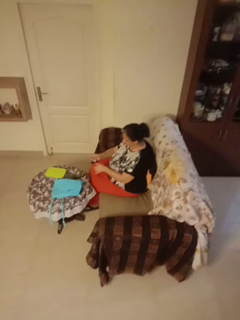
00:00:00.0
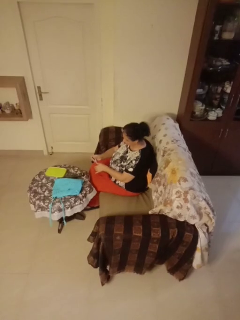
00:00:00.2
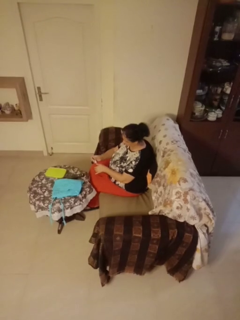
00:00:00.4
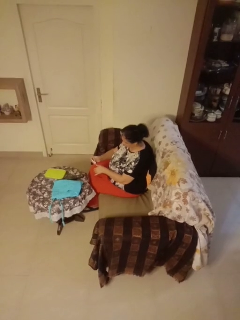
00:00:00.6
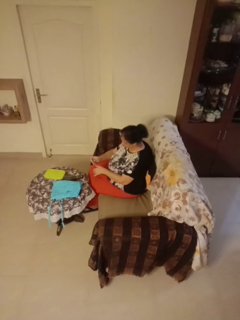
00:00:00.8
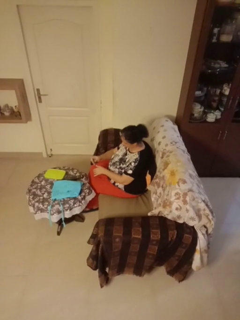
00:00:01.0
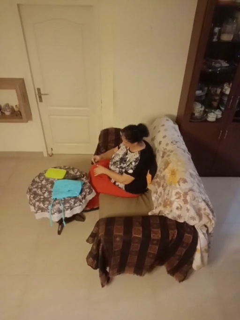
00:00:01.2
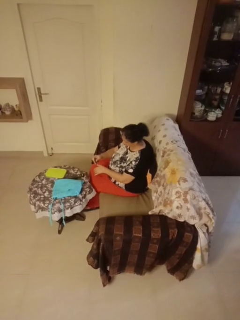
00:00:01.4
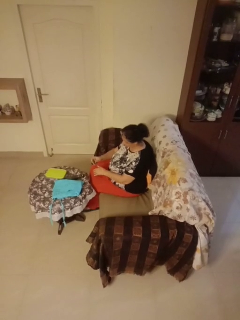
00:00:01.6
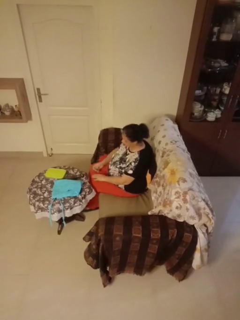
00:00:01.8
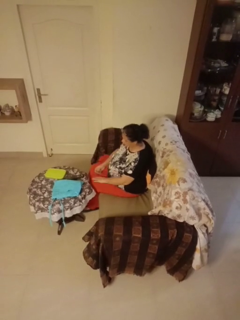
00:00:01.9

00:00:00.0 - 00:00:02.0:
person clips fingernails

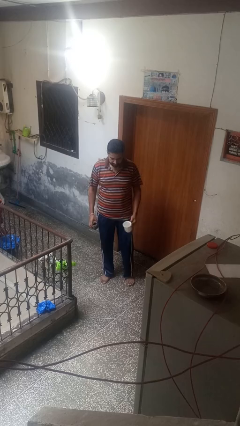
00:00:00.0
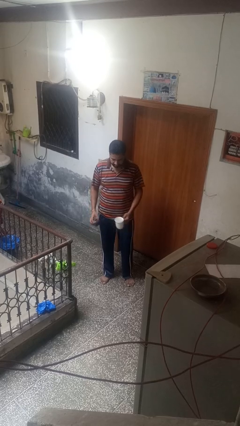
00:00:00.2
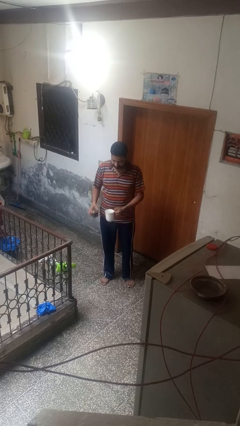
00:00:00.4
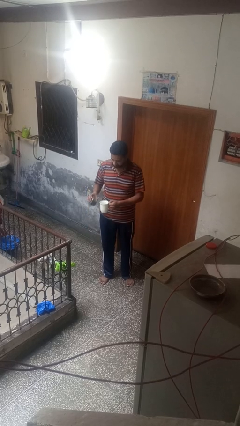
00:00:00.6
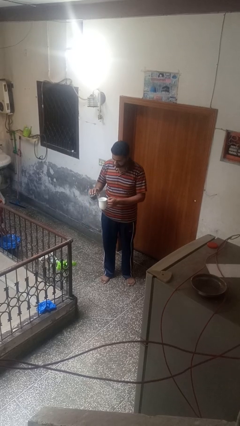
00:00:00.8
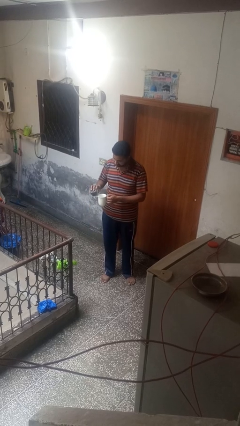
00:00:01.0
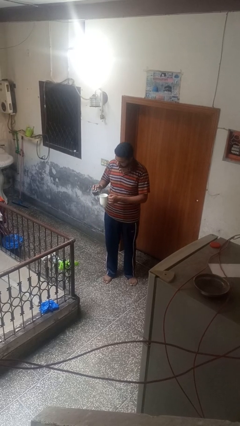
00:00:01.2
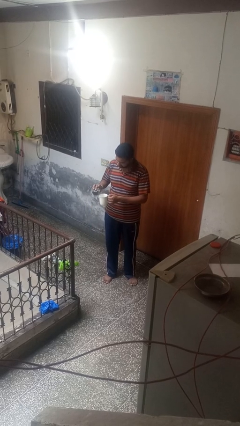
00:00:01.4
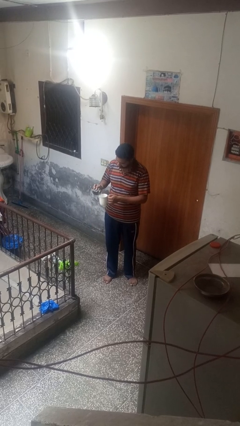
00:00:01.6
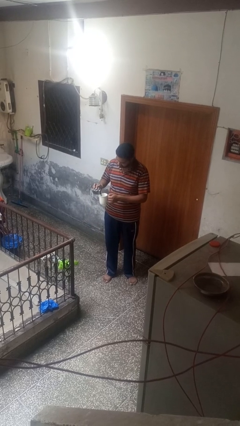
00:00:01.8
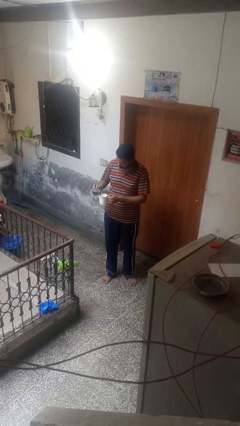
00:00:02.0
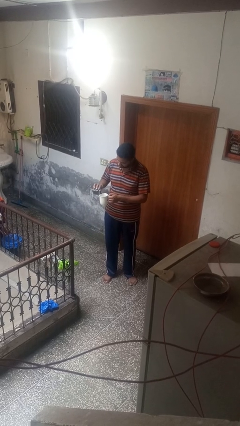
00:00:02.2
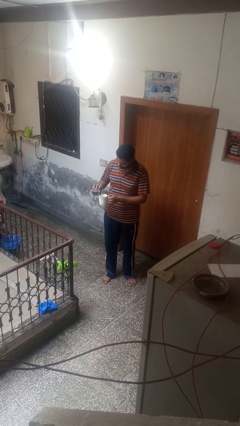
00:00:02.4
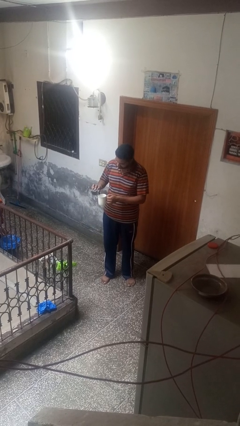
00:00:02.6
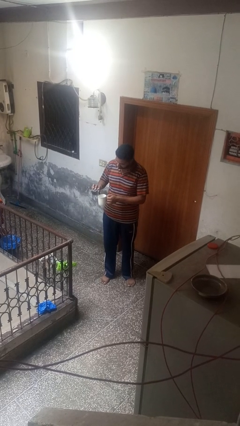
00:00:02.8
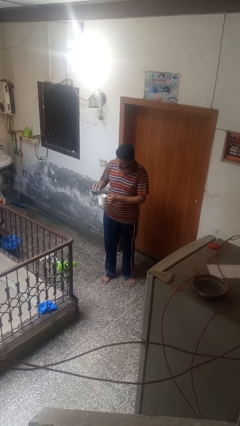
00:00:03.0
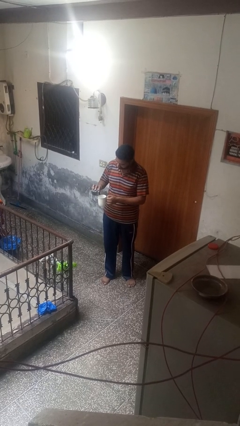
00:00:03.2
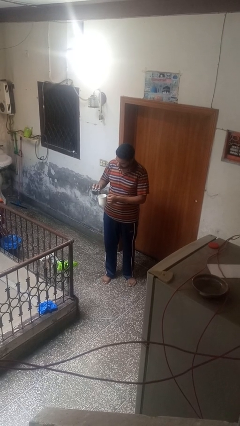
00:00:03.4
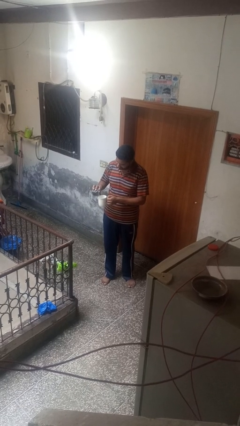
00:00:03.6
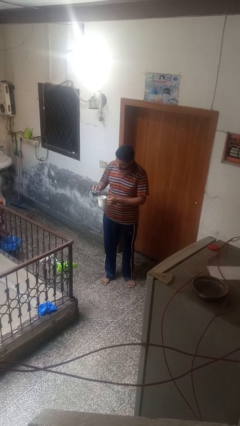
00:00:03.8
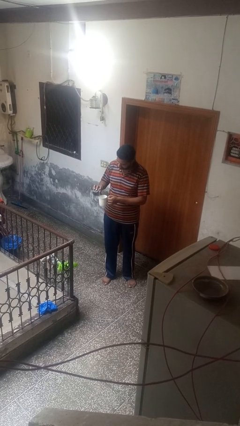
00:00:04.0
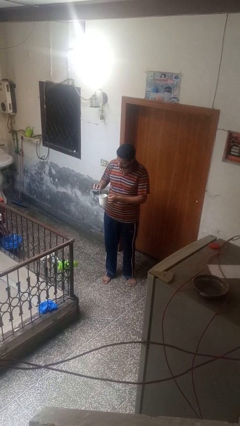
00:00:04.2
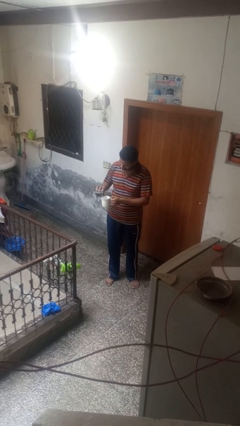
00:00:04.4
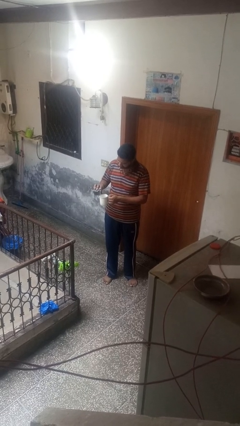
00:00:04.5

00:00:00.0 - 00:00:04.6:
person pours coffee into mug

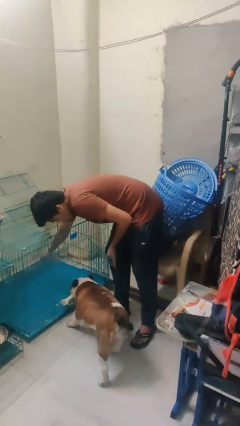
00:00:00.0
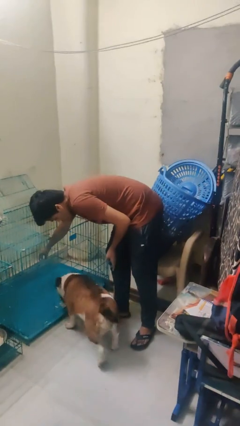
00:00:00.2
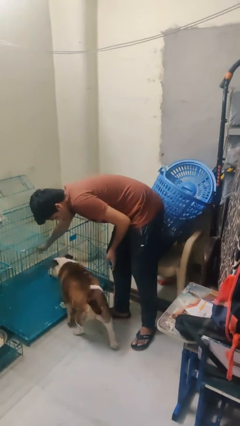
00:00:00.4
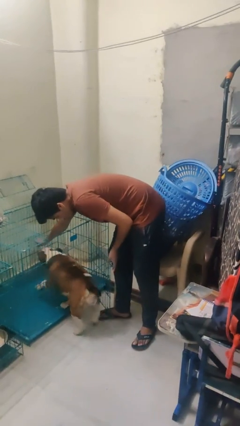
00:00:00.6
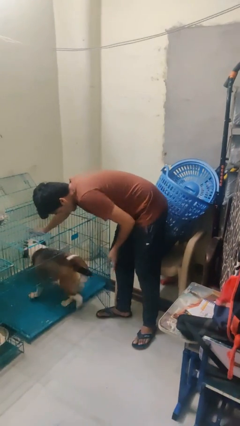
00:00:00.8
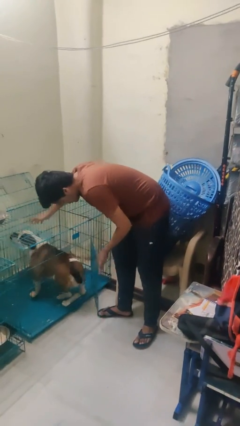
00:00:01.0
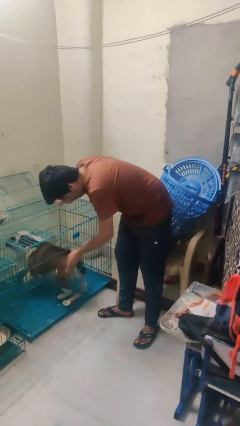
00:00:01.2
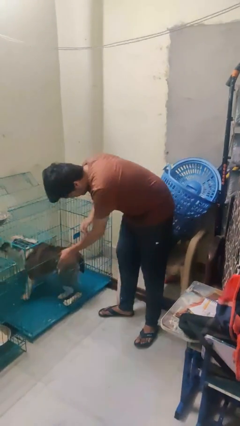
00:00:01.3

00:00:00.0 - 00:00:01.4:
person crates dog

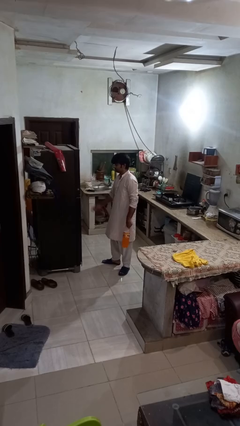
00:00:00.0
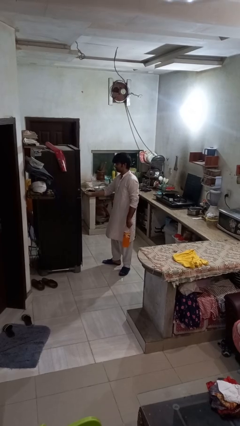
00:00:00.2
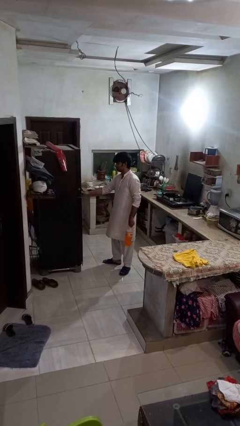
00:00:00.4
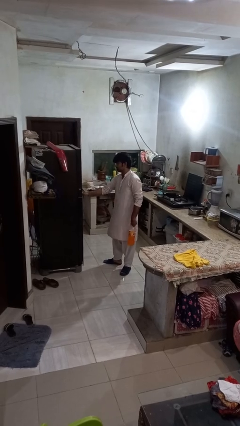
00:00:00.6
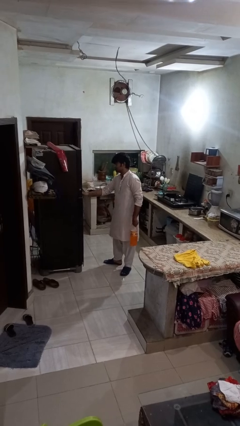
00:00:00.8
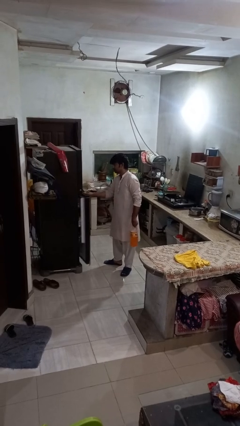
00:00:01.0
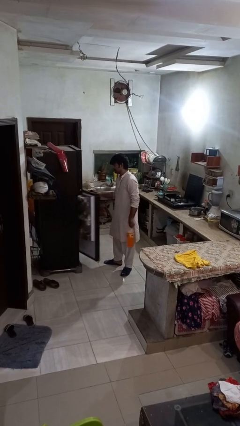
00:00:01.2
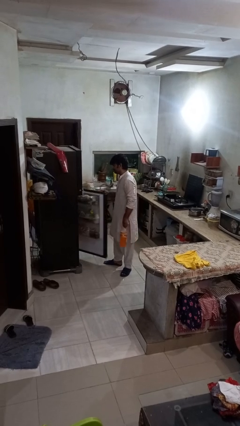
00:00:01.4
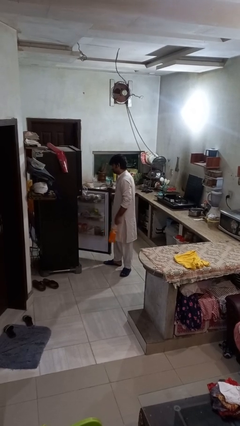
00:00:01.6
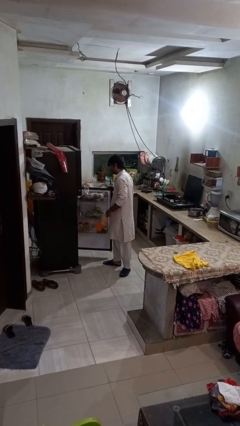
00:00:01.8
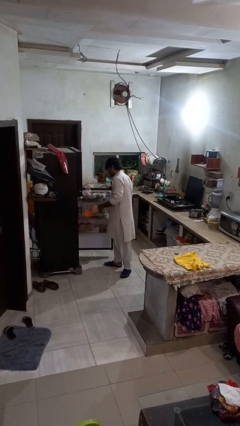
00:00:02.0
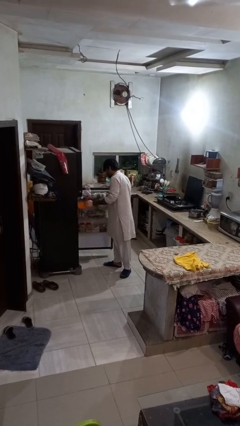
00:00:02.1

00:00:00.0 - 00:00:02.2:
person opens refrigerator

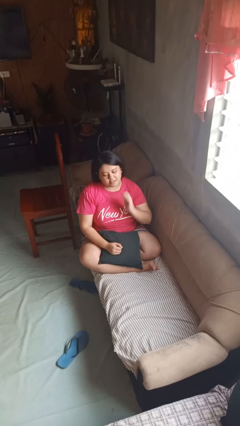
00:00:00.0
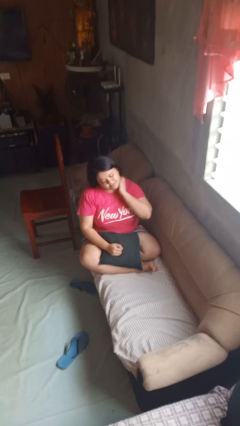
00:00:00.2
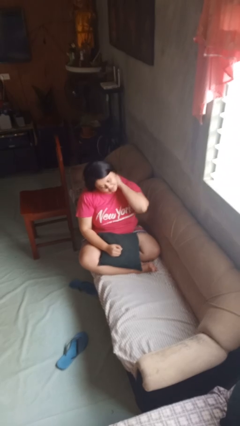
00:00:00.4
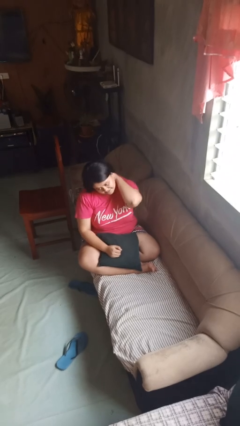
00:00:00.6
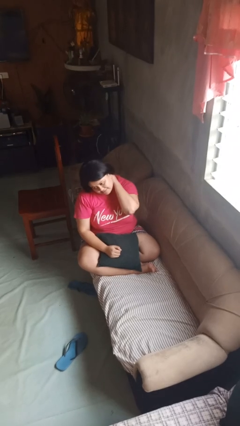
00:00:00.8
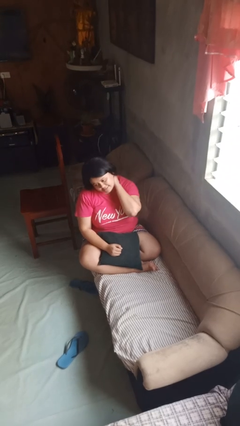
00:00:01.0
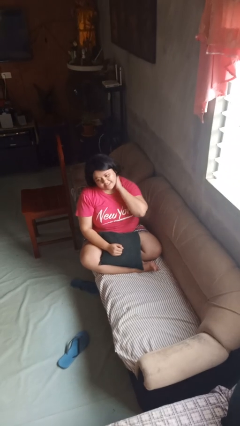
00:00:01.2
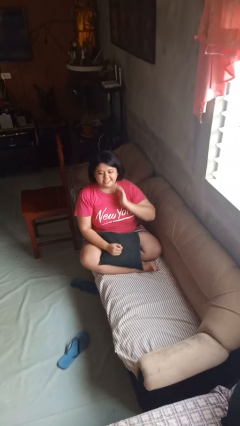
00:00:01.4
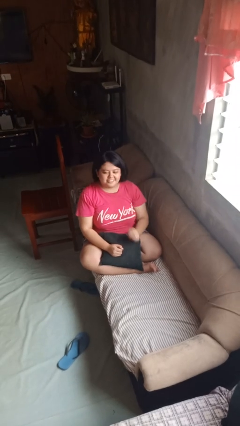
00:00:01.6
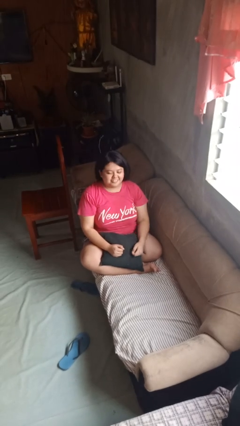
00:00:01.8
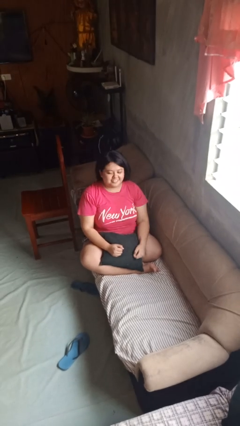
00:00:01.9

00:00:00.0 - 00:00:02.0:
person rubs neck

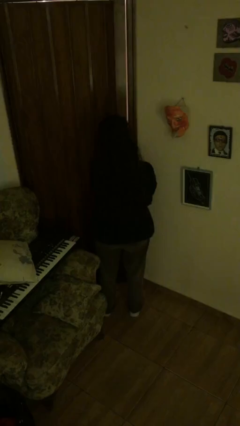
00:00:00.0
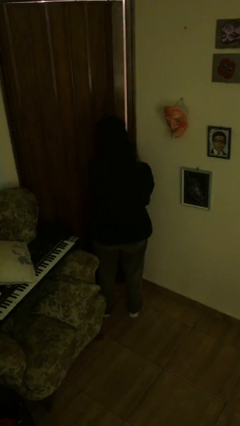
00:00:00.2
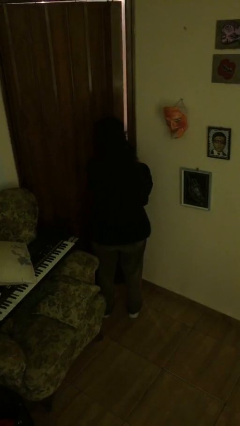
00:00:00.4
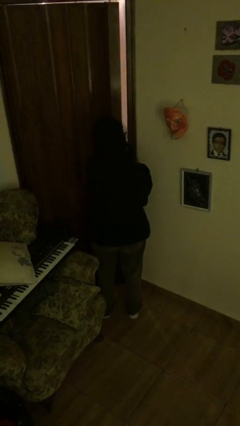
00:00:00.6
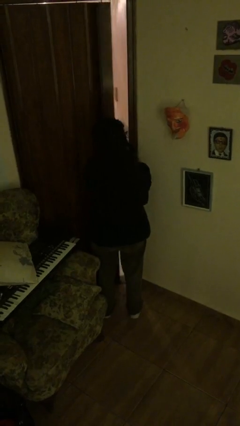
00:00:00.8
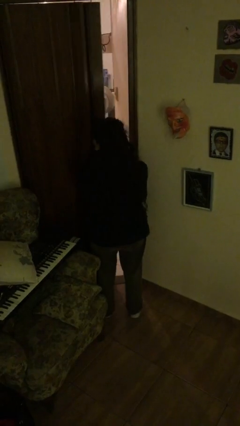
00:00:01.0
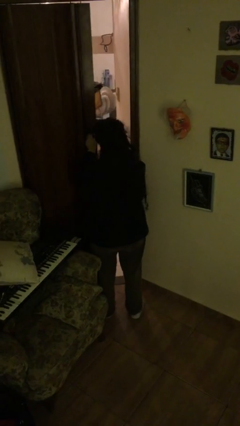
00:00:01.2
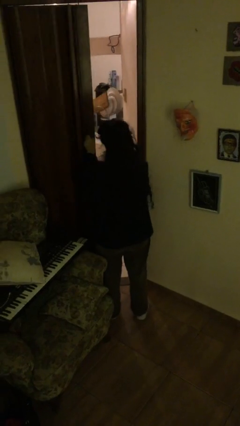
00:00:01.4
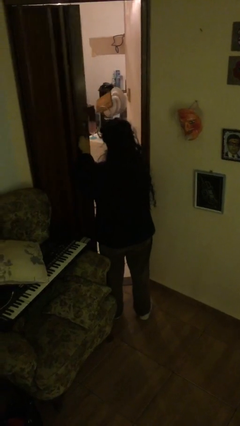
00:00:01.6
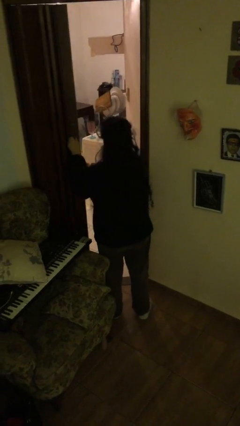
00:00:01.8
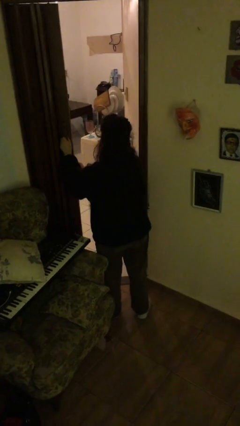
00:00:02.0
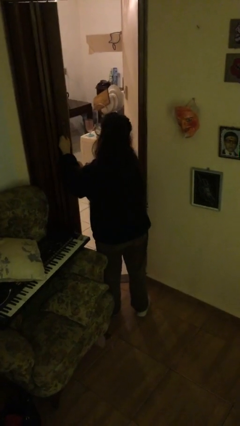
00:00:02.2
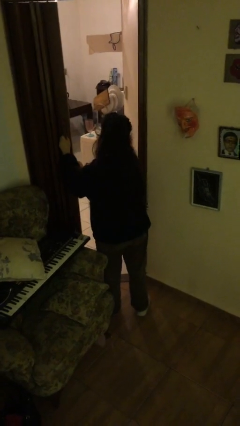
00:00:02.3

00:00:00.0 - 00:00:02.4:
person opens sliding door

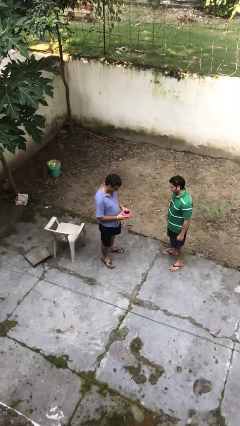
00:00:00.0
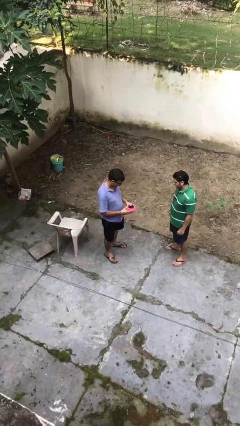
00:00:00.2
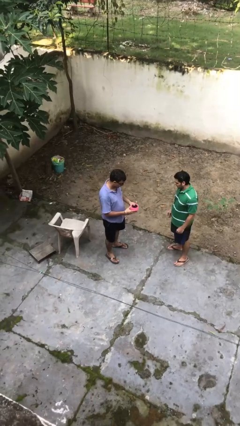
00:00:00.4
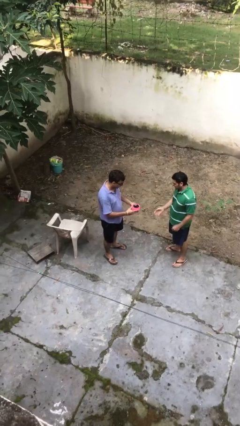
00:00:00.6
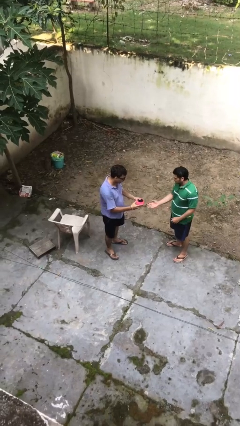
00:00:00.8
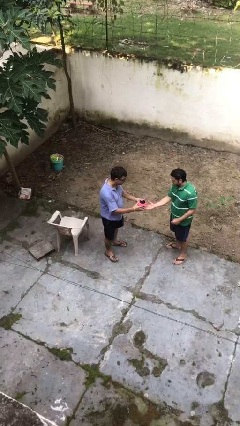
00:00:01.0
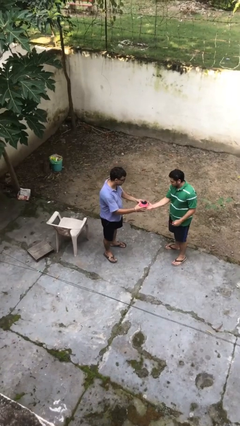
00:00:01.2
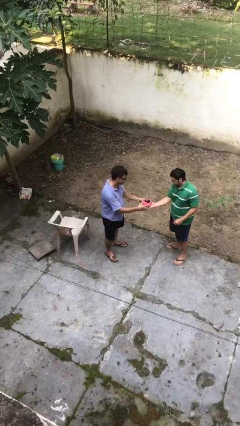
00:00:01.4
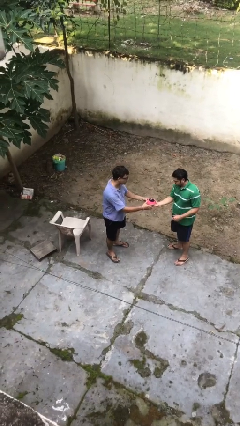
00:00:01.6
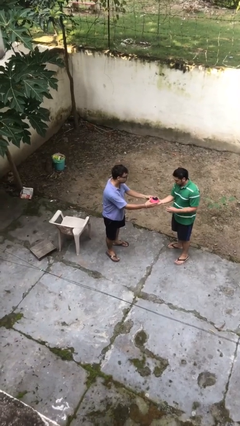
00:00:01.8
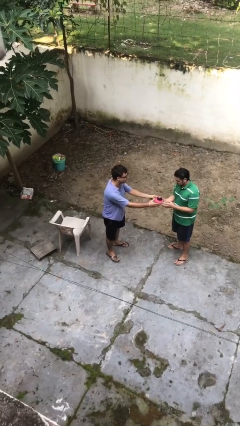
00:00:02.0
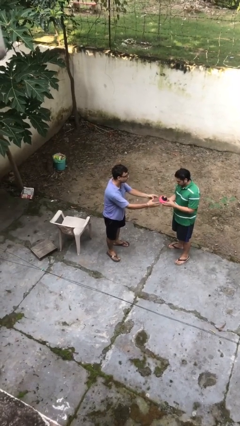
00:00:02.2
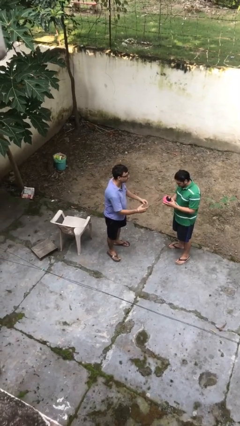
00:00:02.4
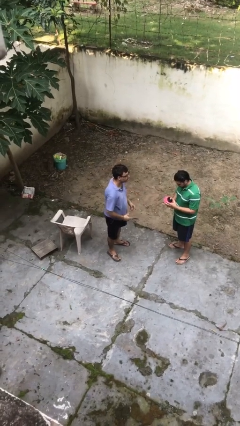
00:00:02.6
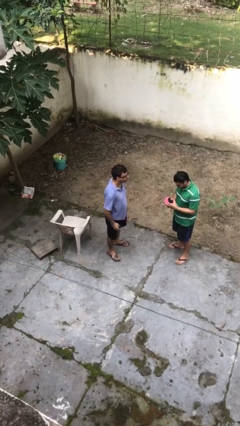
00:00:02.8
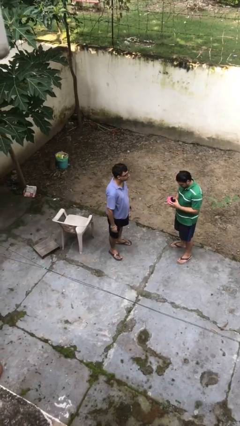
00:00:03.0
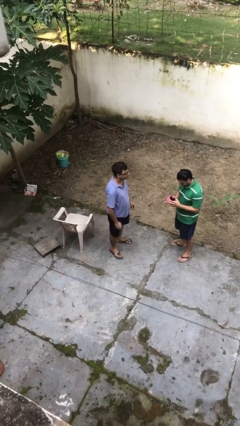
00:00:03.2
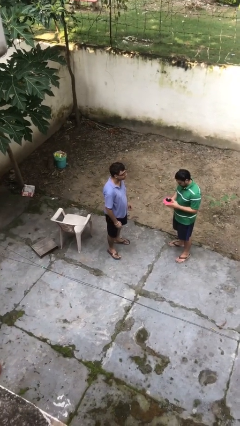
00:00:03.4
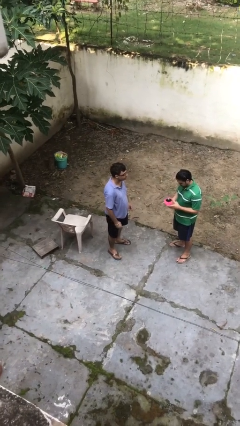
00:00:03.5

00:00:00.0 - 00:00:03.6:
person transfers object to person
